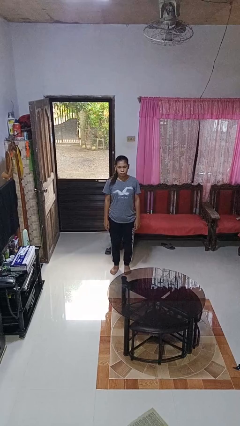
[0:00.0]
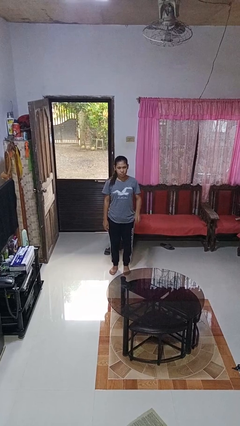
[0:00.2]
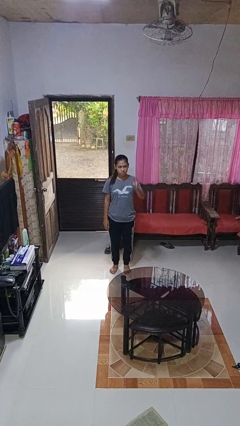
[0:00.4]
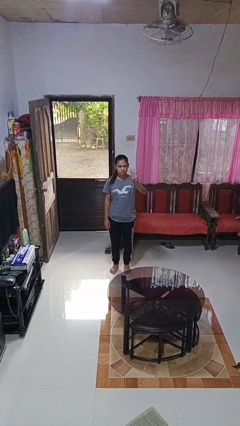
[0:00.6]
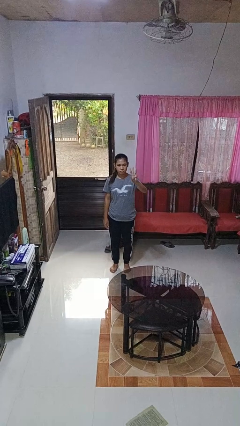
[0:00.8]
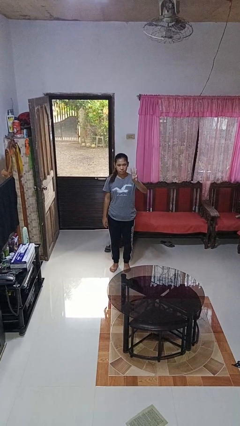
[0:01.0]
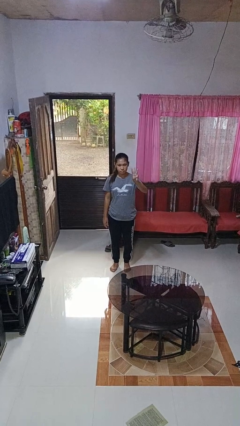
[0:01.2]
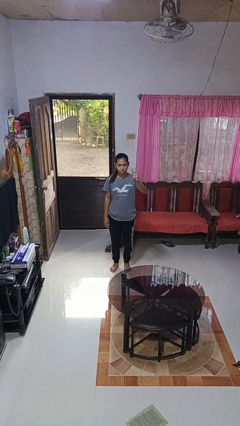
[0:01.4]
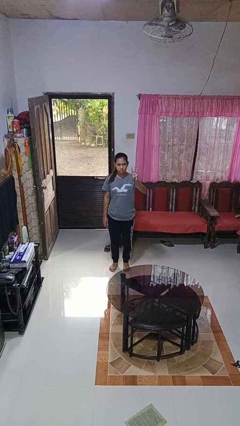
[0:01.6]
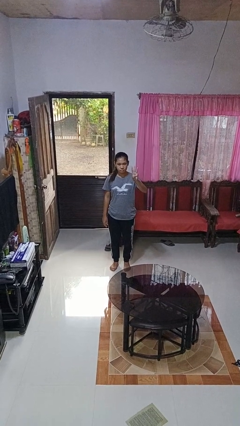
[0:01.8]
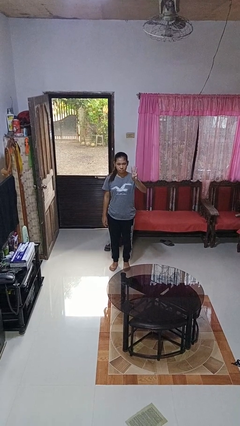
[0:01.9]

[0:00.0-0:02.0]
person gestures number three

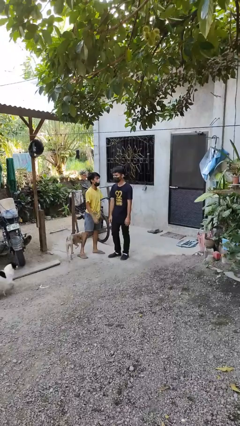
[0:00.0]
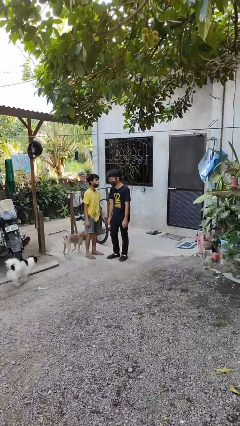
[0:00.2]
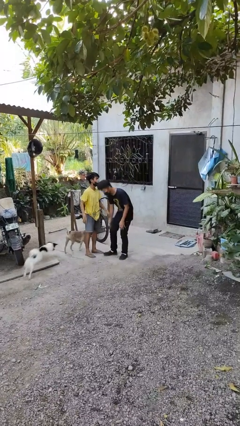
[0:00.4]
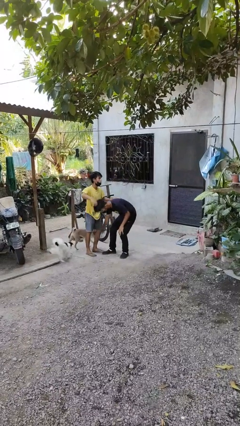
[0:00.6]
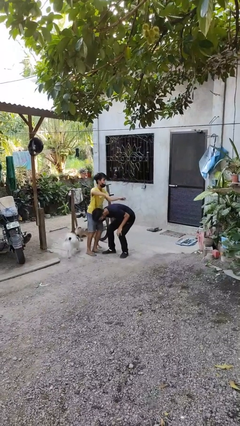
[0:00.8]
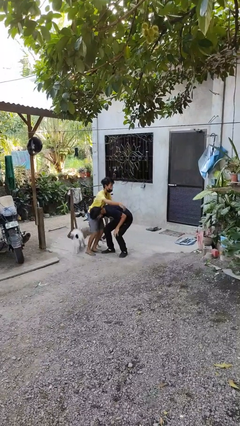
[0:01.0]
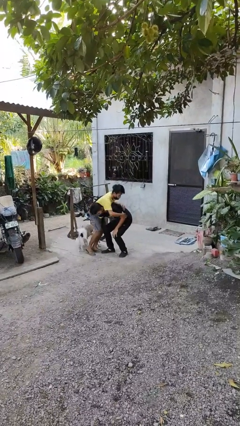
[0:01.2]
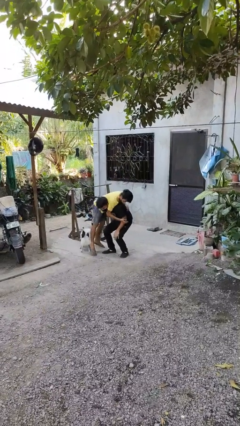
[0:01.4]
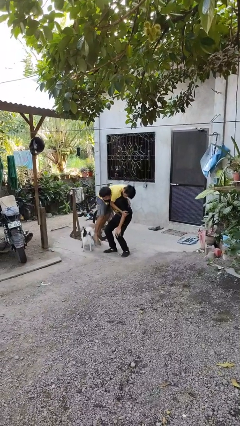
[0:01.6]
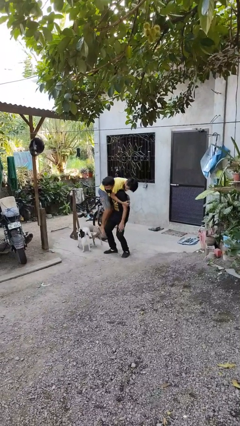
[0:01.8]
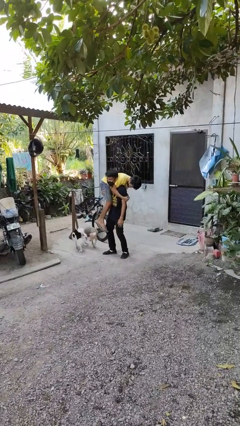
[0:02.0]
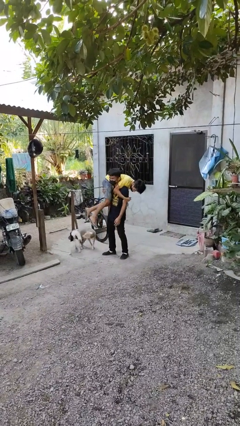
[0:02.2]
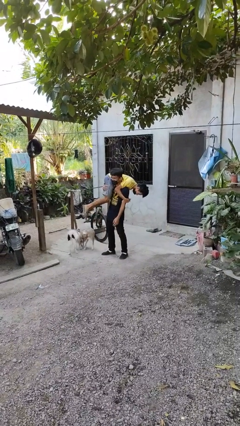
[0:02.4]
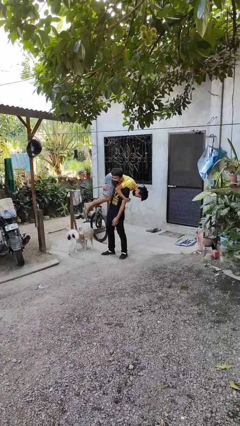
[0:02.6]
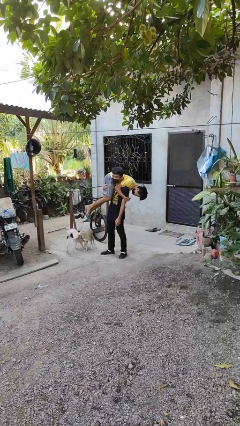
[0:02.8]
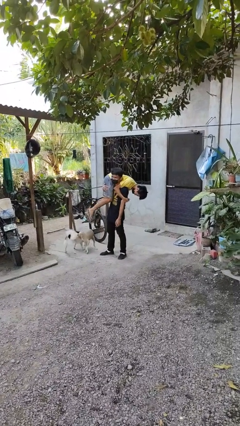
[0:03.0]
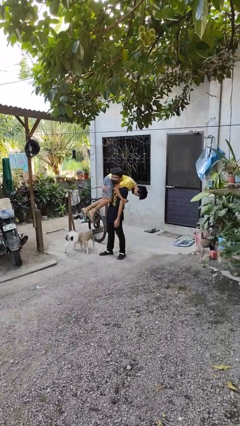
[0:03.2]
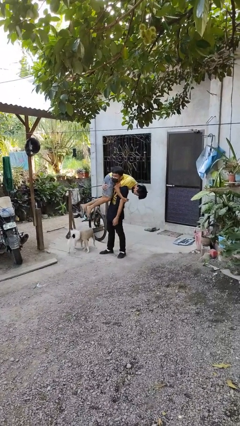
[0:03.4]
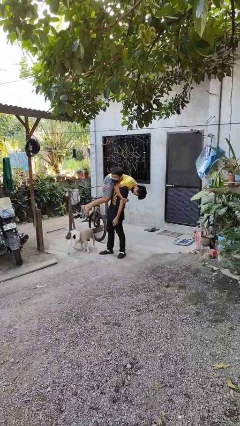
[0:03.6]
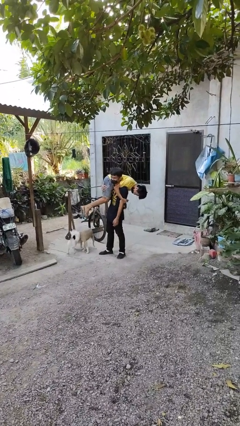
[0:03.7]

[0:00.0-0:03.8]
person carries person over shoulder

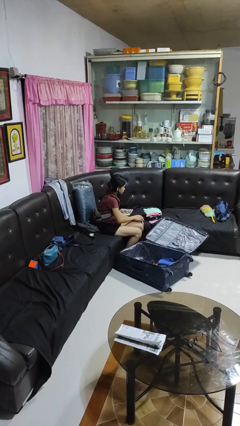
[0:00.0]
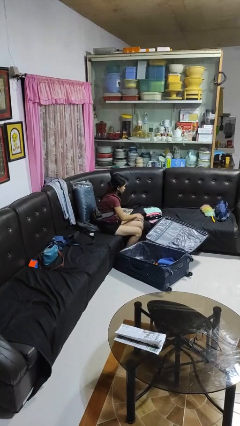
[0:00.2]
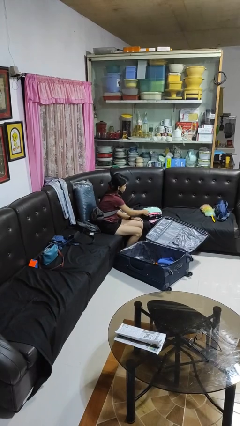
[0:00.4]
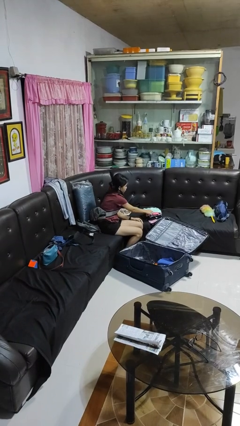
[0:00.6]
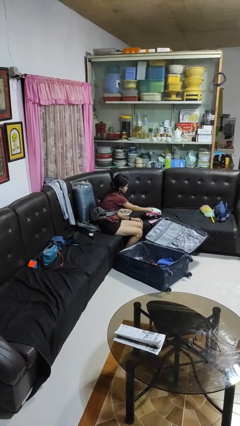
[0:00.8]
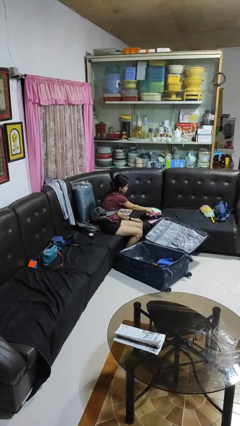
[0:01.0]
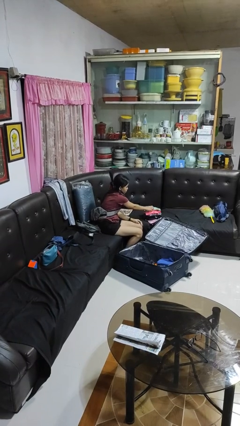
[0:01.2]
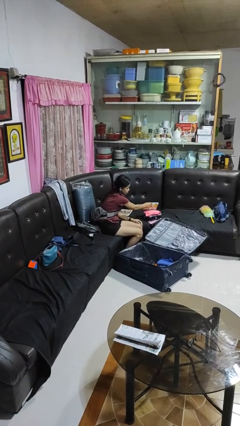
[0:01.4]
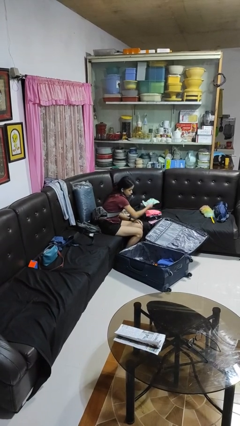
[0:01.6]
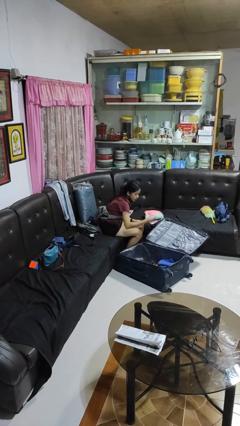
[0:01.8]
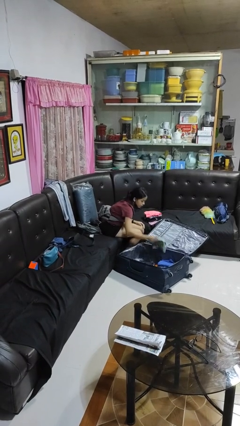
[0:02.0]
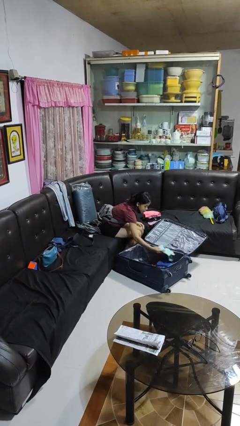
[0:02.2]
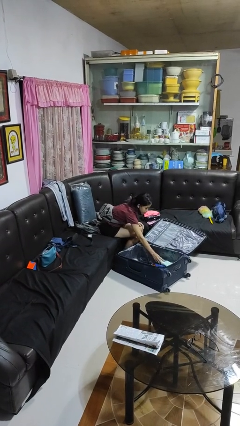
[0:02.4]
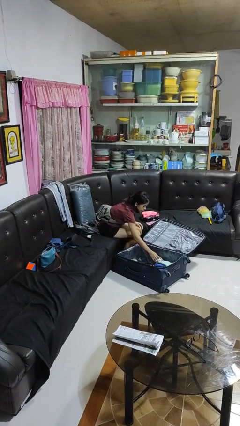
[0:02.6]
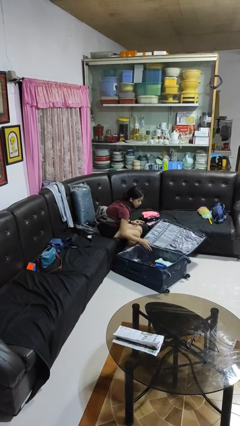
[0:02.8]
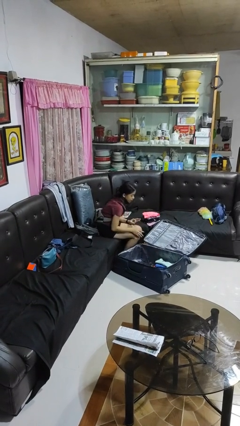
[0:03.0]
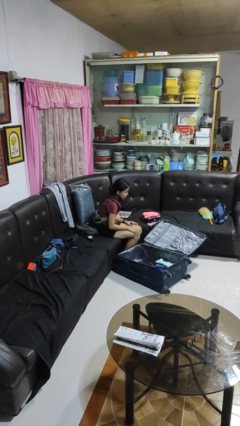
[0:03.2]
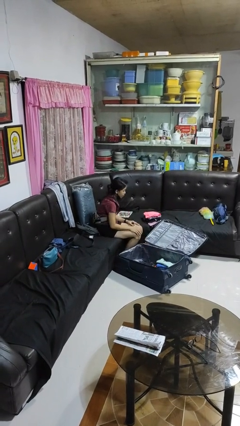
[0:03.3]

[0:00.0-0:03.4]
person loads clothes into suitcase

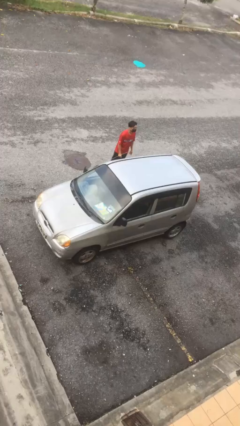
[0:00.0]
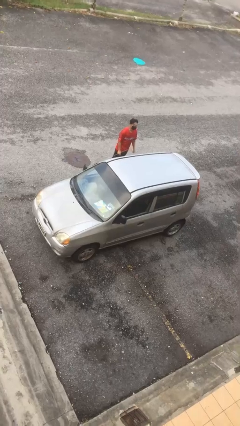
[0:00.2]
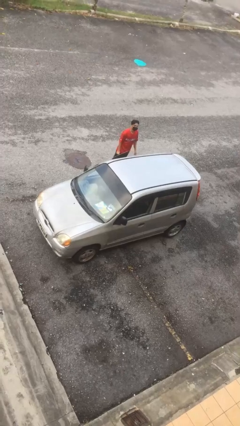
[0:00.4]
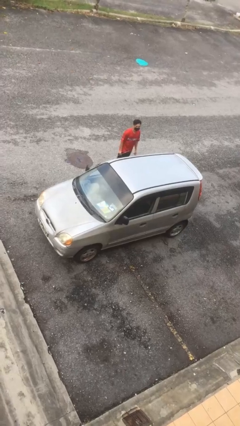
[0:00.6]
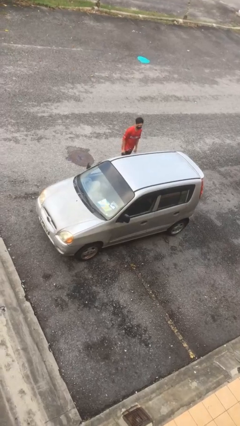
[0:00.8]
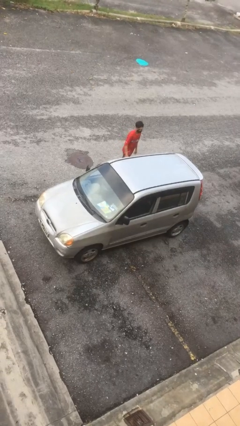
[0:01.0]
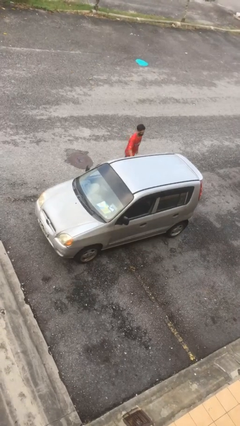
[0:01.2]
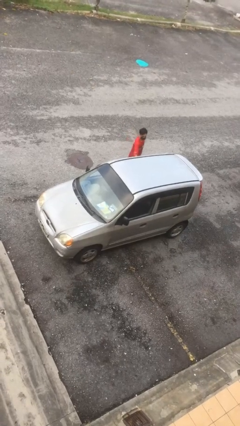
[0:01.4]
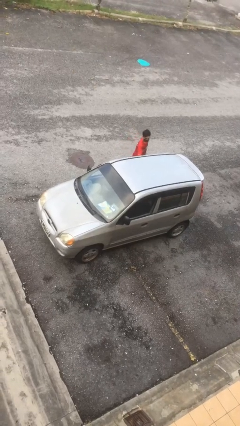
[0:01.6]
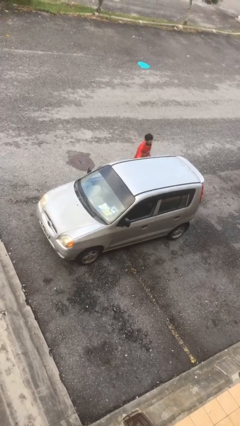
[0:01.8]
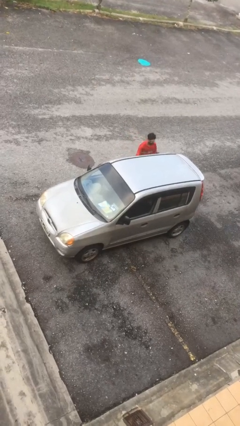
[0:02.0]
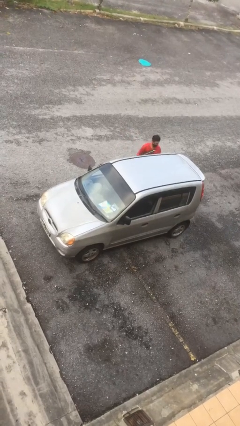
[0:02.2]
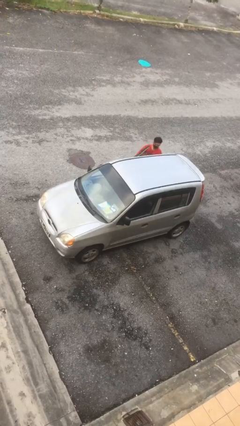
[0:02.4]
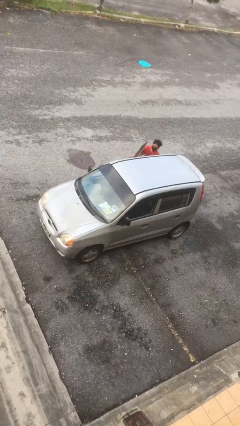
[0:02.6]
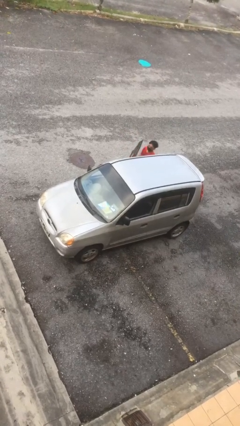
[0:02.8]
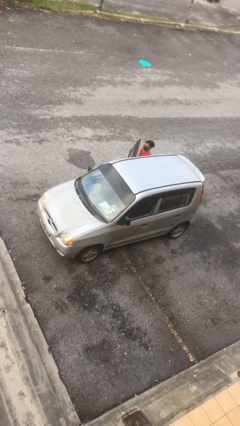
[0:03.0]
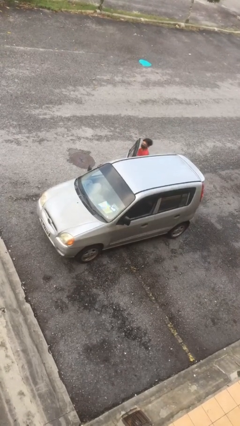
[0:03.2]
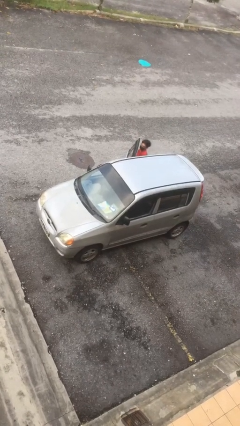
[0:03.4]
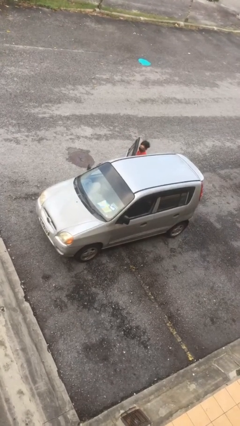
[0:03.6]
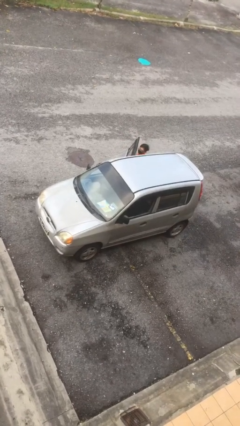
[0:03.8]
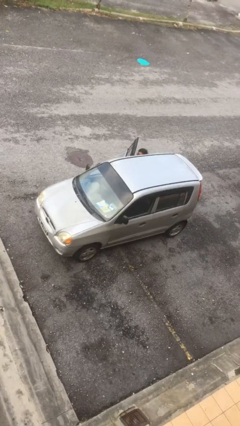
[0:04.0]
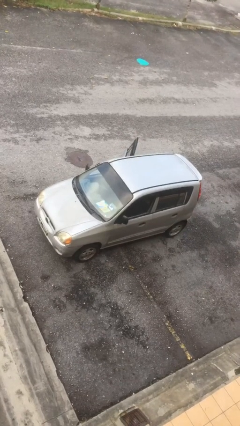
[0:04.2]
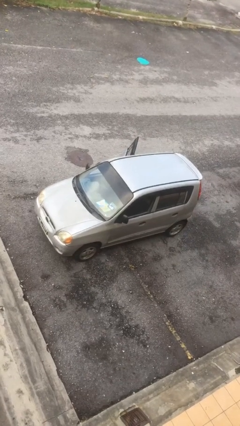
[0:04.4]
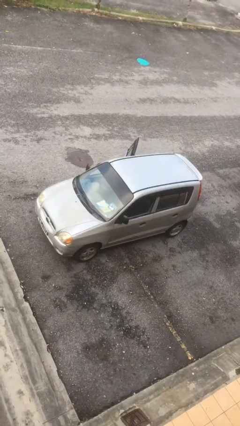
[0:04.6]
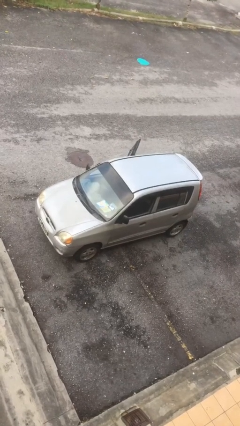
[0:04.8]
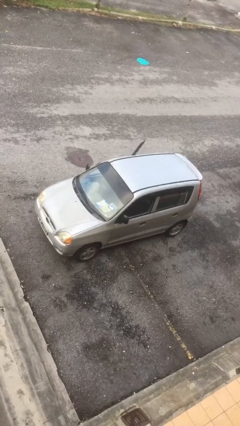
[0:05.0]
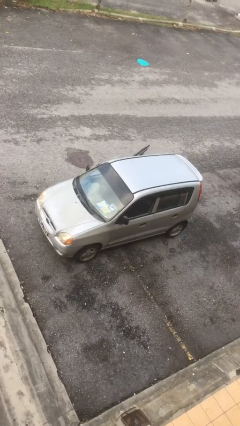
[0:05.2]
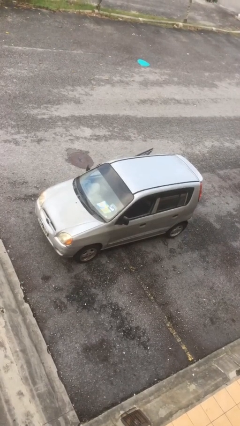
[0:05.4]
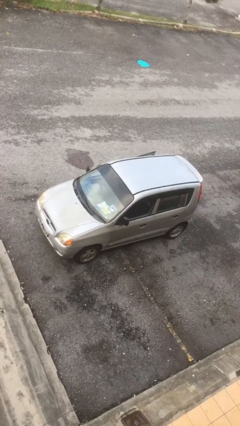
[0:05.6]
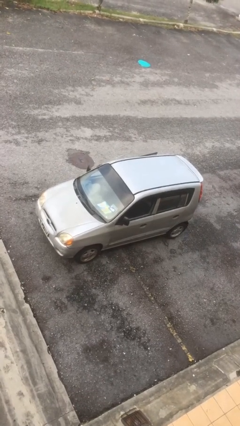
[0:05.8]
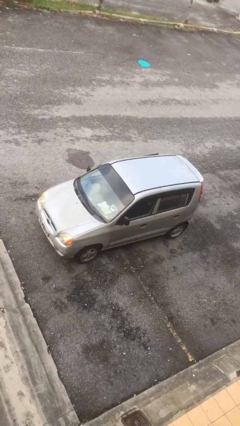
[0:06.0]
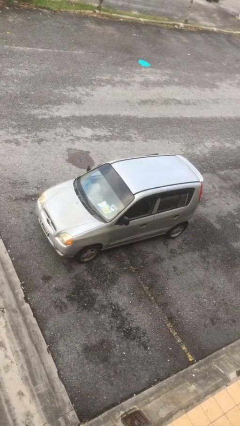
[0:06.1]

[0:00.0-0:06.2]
car picks up person

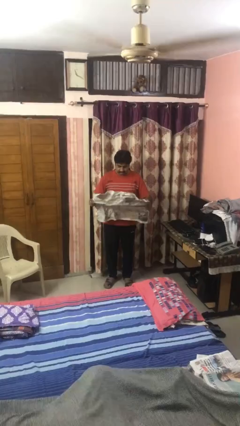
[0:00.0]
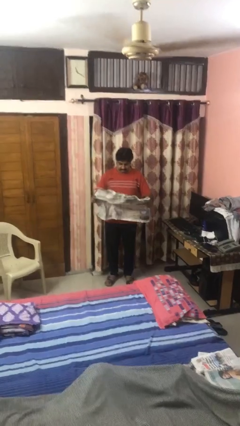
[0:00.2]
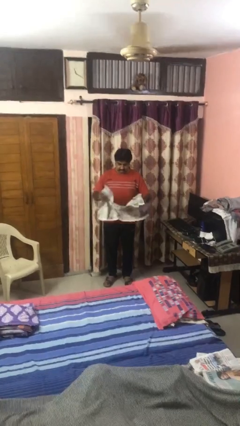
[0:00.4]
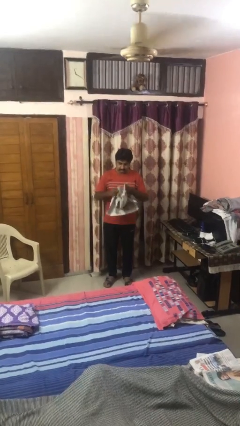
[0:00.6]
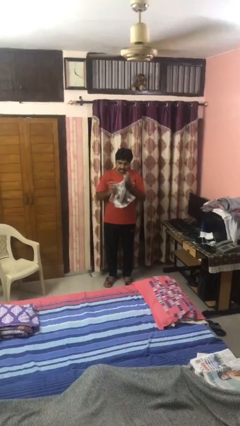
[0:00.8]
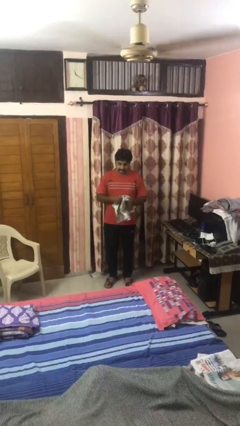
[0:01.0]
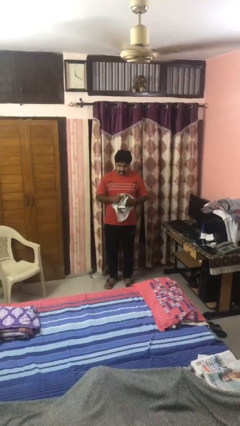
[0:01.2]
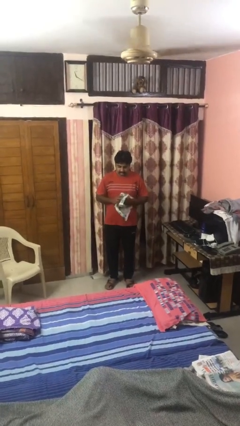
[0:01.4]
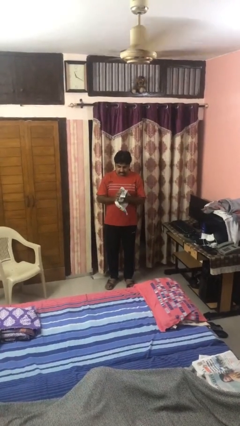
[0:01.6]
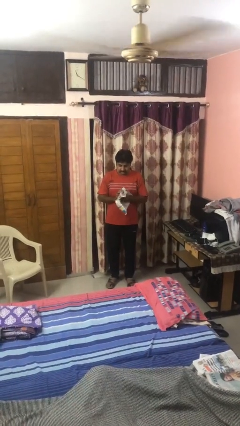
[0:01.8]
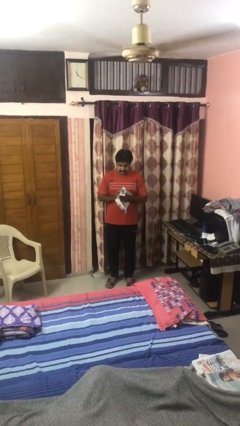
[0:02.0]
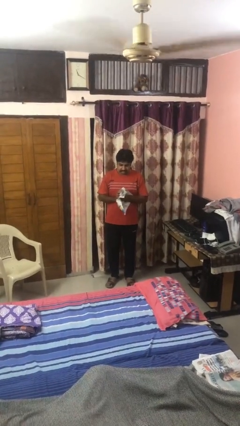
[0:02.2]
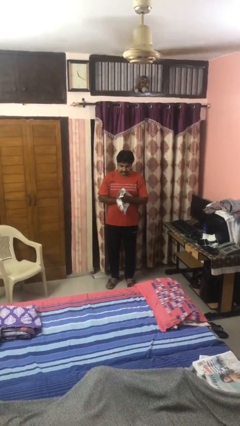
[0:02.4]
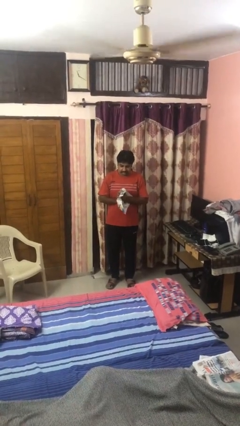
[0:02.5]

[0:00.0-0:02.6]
person crumples paper

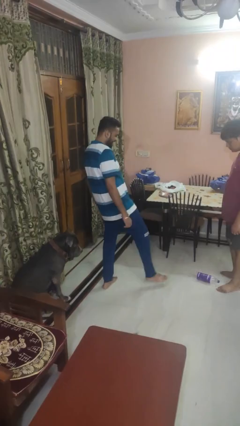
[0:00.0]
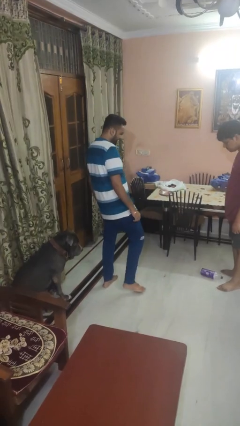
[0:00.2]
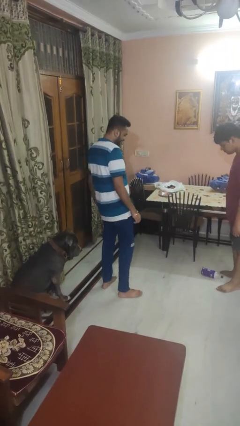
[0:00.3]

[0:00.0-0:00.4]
person kicks object to person
